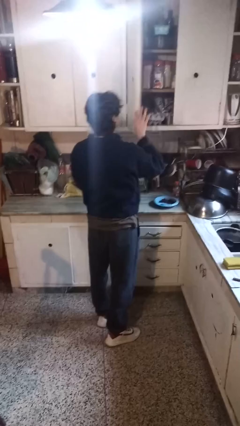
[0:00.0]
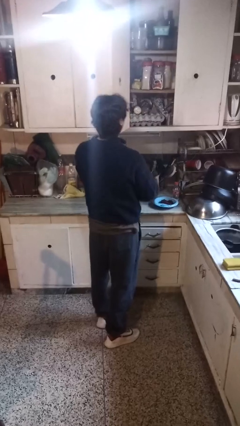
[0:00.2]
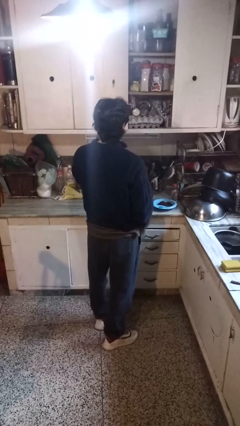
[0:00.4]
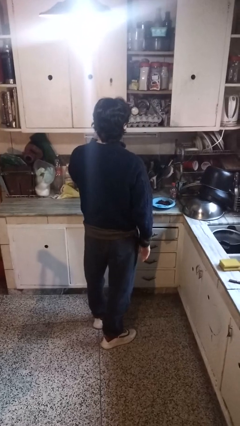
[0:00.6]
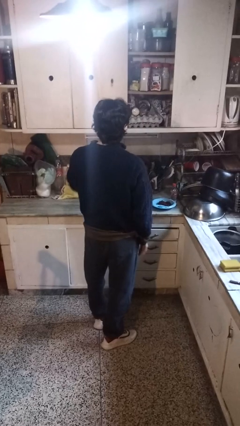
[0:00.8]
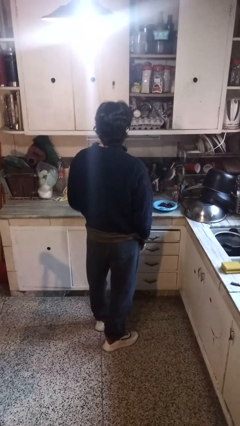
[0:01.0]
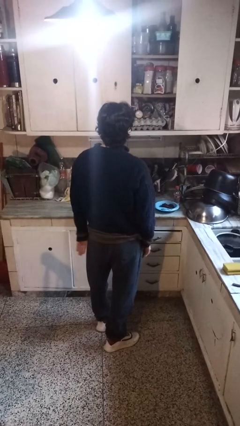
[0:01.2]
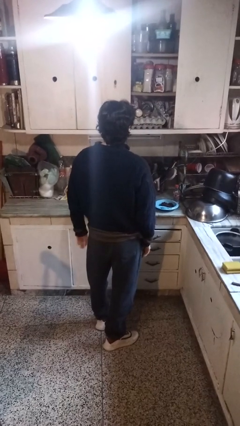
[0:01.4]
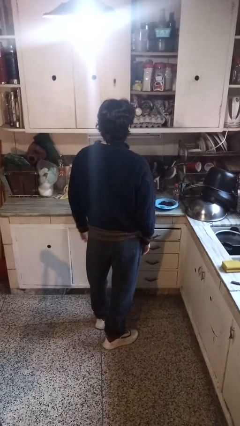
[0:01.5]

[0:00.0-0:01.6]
person opens cabinet

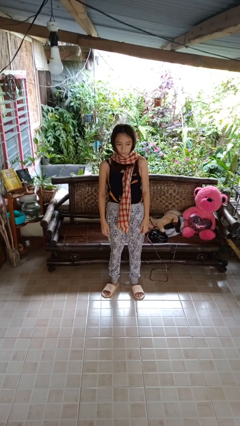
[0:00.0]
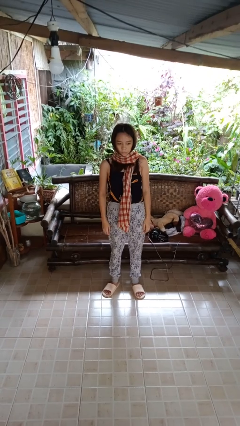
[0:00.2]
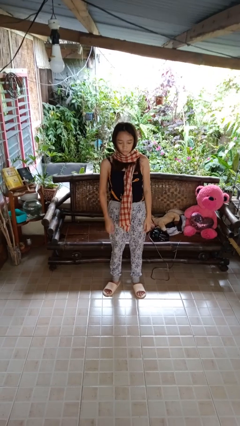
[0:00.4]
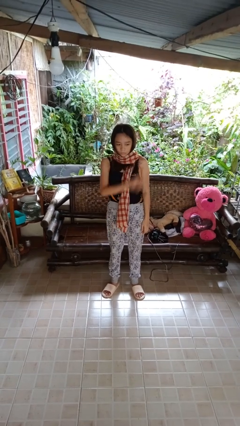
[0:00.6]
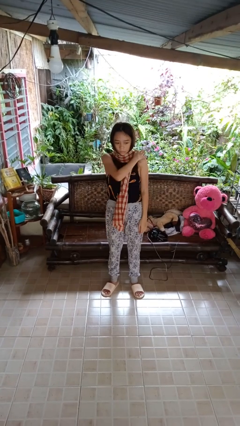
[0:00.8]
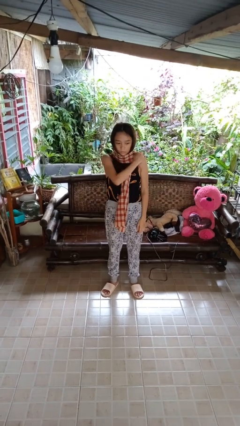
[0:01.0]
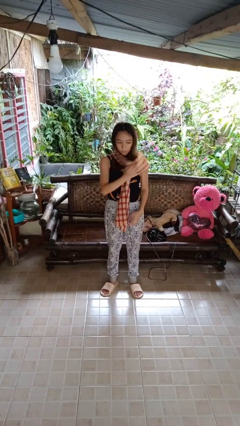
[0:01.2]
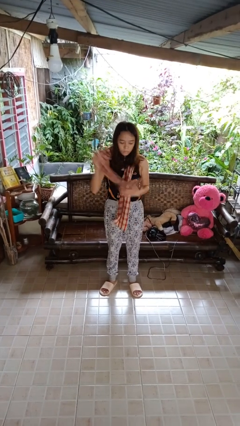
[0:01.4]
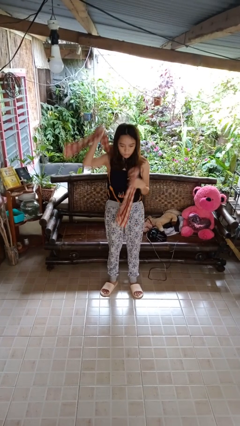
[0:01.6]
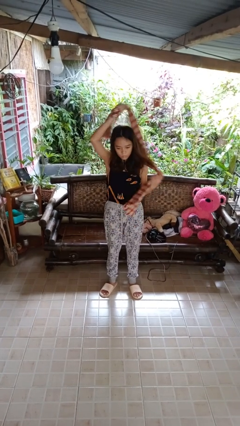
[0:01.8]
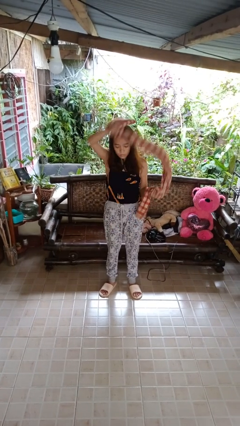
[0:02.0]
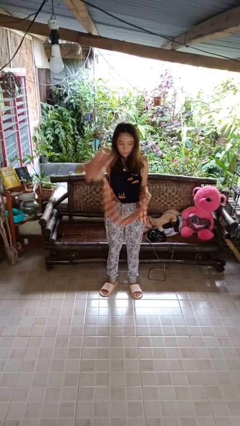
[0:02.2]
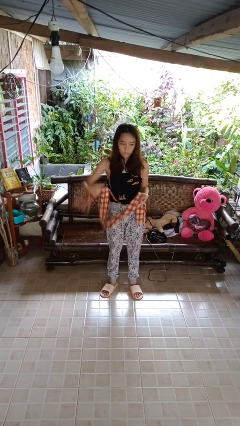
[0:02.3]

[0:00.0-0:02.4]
person takes off scarf

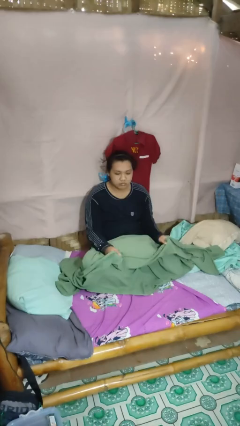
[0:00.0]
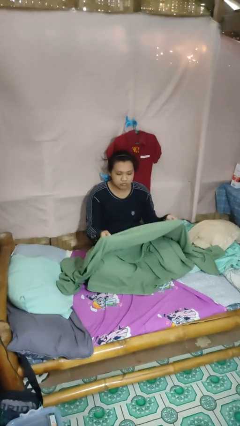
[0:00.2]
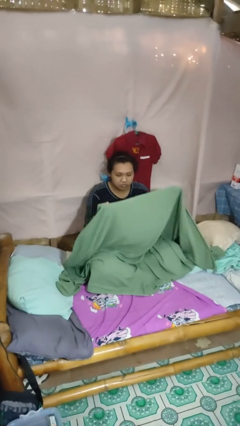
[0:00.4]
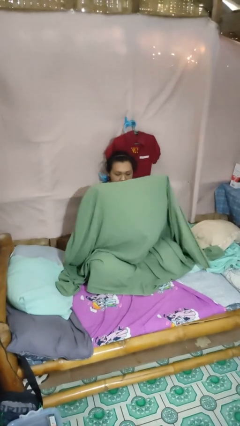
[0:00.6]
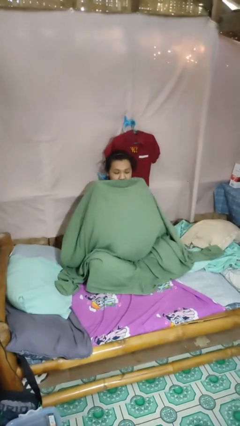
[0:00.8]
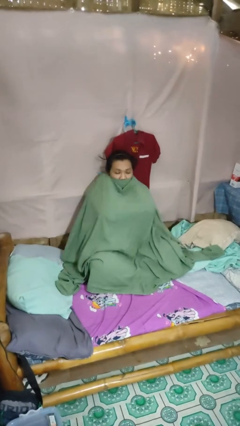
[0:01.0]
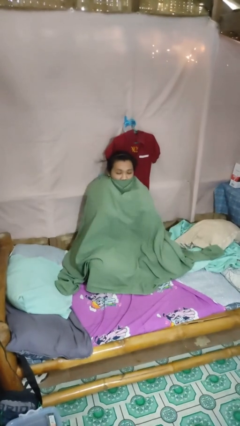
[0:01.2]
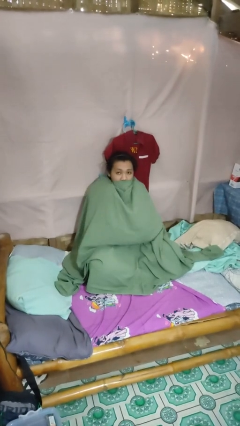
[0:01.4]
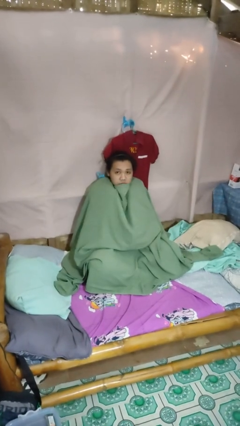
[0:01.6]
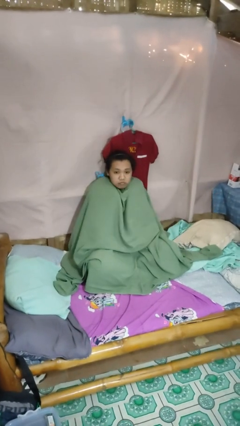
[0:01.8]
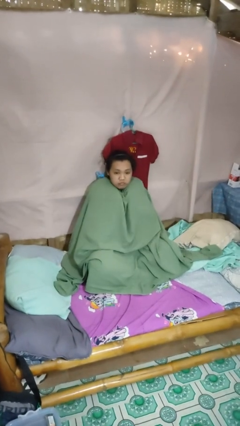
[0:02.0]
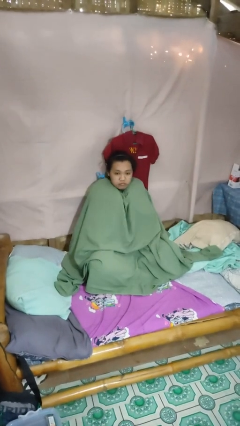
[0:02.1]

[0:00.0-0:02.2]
person covers with blanket

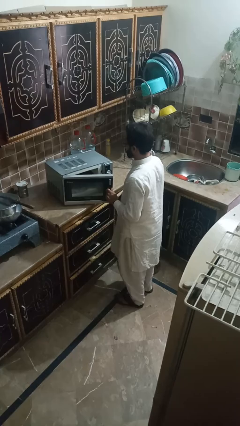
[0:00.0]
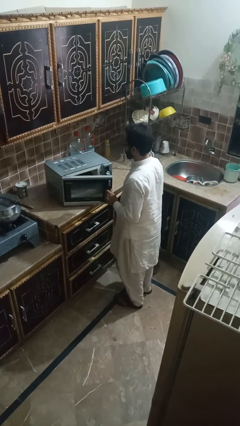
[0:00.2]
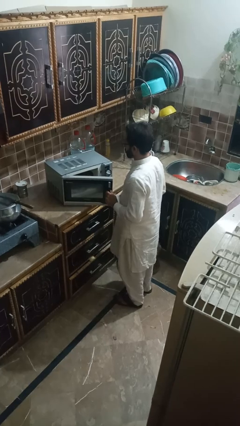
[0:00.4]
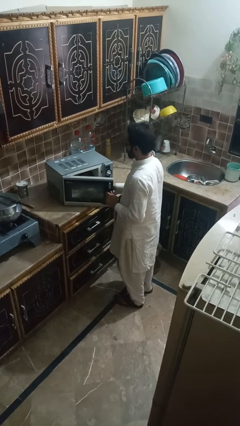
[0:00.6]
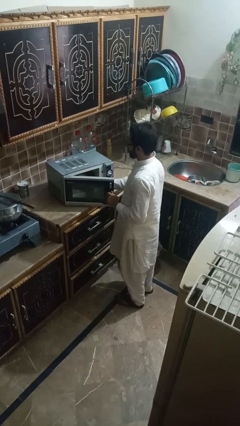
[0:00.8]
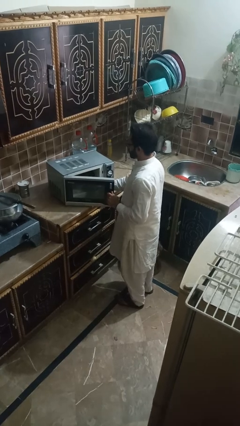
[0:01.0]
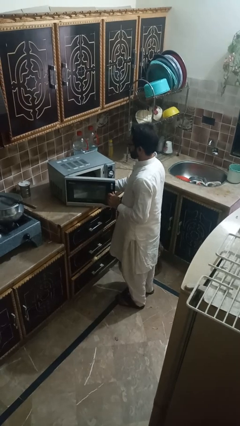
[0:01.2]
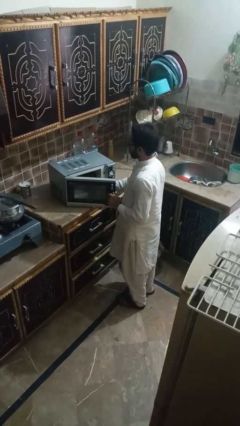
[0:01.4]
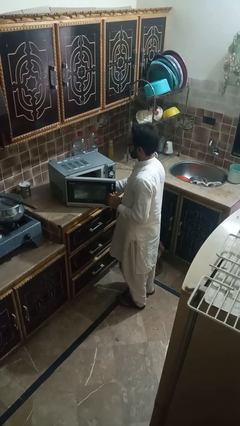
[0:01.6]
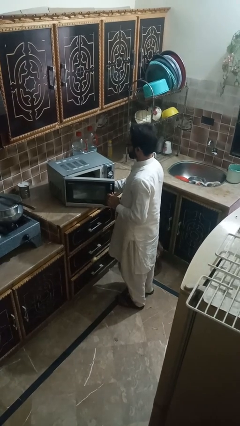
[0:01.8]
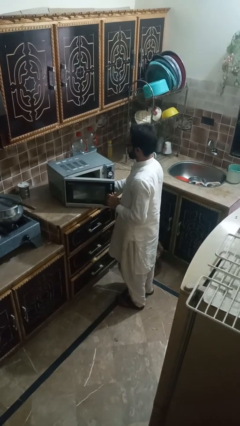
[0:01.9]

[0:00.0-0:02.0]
person puts object into microwave

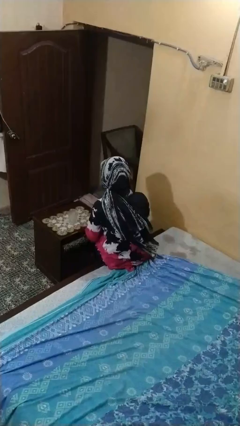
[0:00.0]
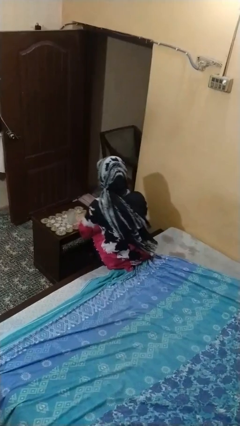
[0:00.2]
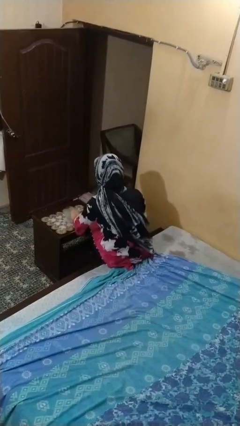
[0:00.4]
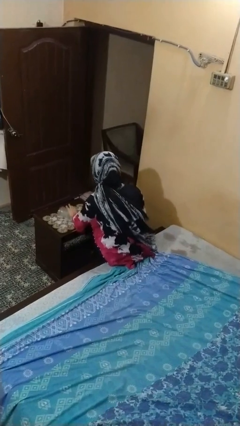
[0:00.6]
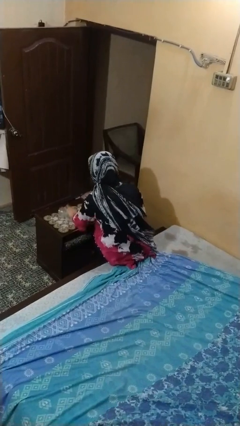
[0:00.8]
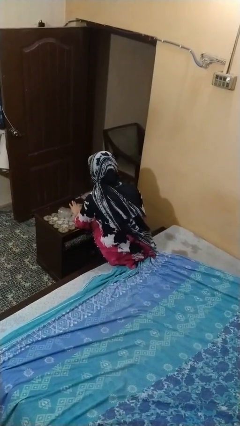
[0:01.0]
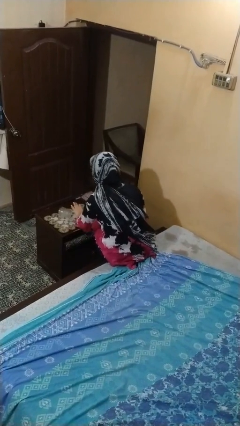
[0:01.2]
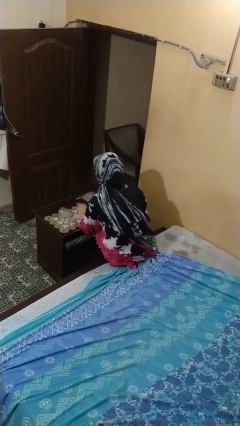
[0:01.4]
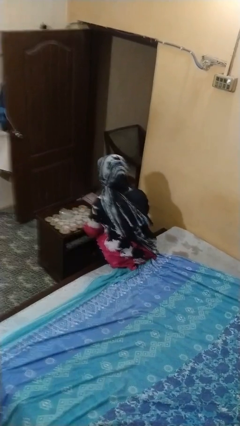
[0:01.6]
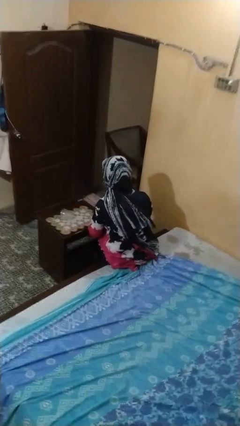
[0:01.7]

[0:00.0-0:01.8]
person knocks over glass

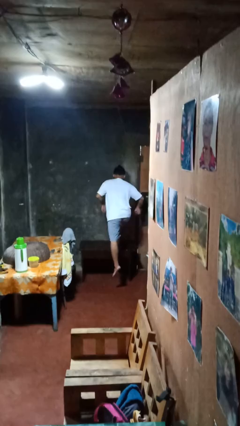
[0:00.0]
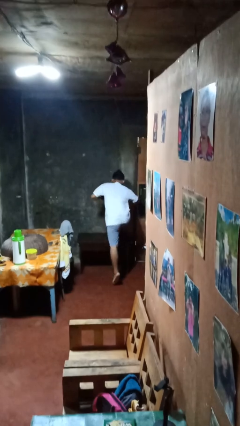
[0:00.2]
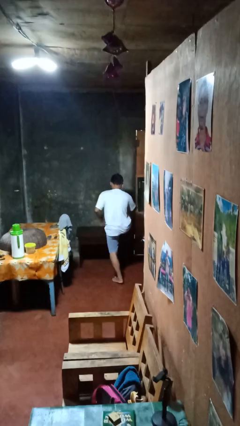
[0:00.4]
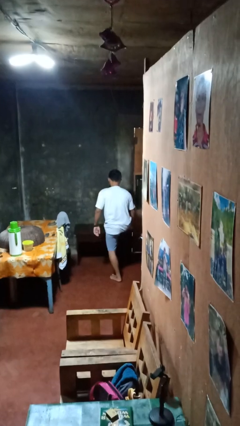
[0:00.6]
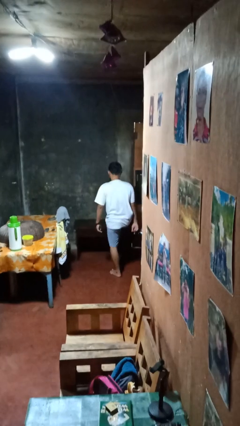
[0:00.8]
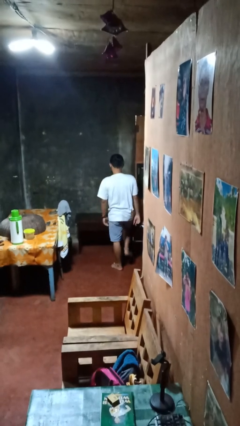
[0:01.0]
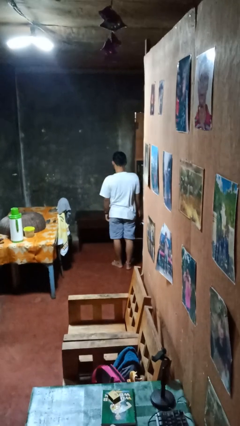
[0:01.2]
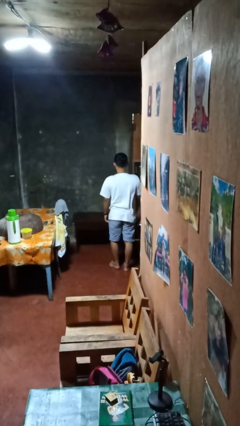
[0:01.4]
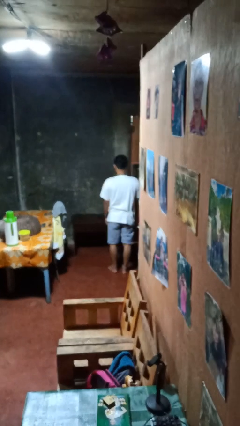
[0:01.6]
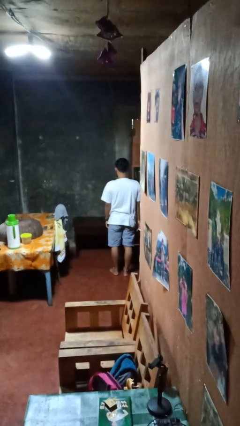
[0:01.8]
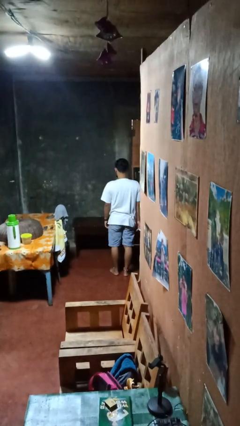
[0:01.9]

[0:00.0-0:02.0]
person climbs off table

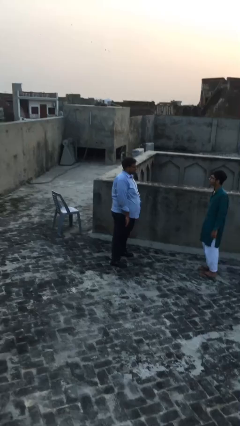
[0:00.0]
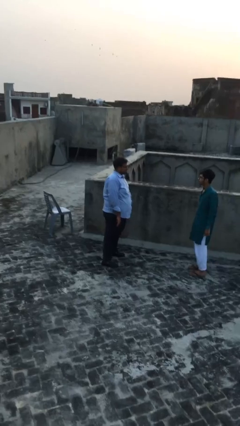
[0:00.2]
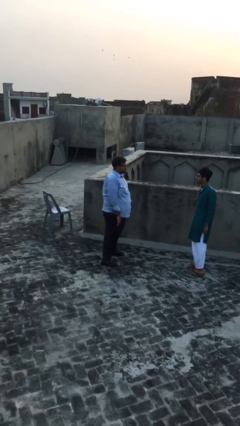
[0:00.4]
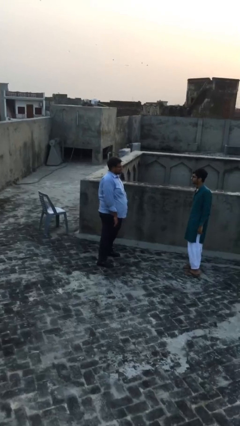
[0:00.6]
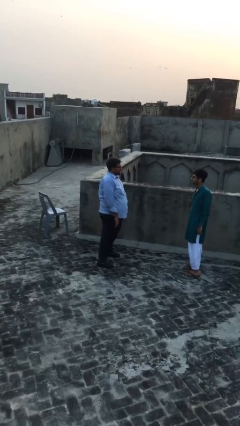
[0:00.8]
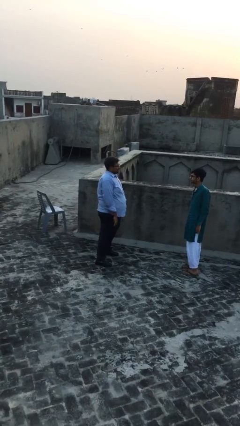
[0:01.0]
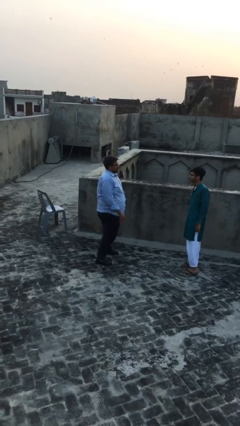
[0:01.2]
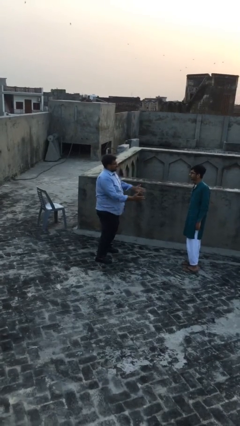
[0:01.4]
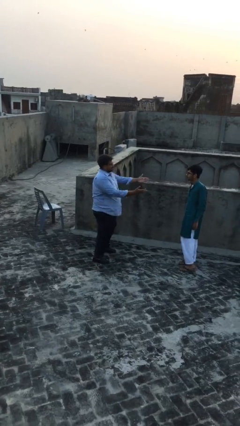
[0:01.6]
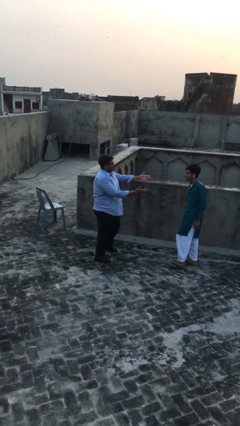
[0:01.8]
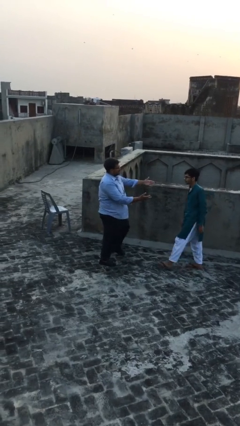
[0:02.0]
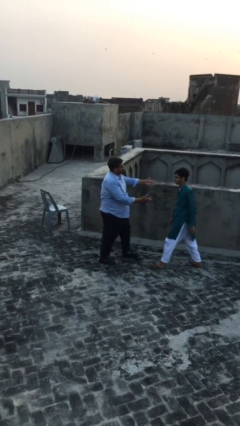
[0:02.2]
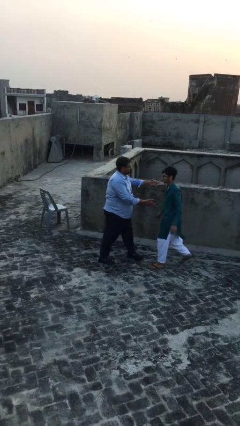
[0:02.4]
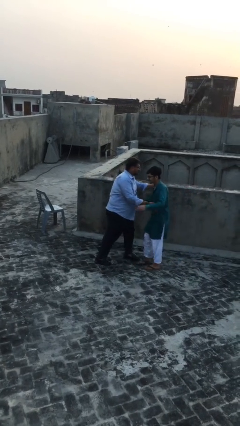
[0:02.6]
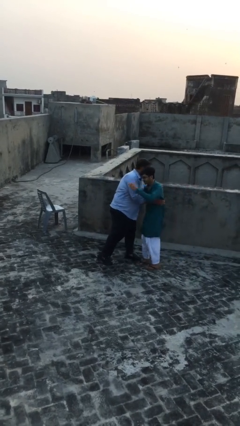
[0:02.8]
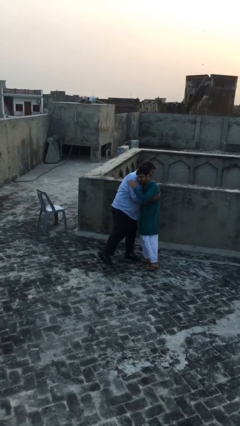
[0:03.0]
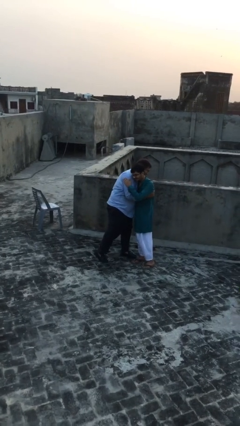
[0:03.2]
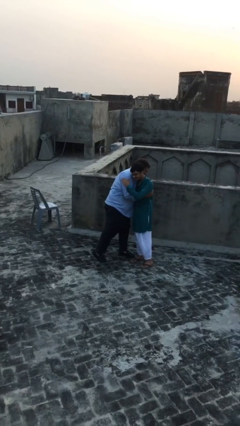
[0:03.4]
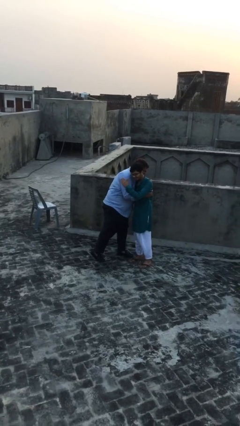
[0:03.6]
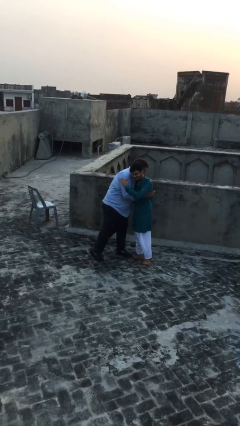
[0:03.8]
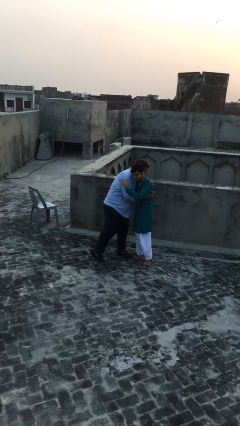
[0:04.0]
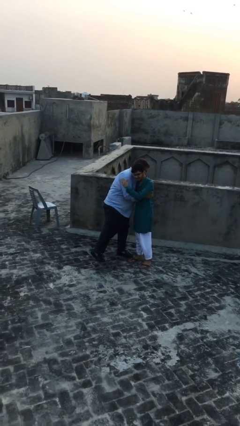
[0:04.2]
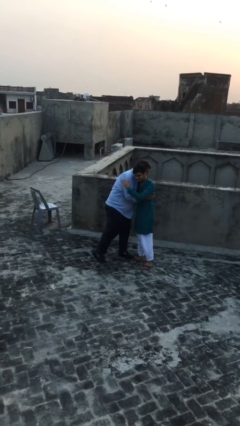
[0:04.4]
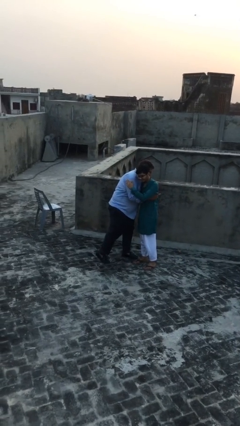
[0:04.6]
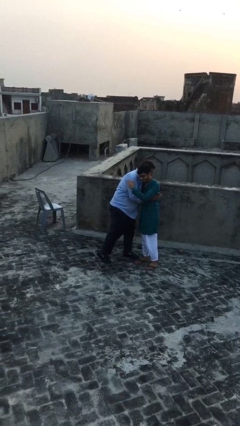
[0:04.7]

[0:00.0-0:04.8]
person embraces person

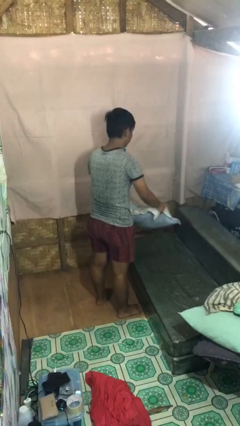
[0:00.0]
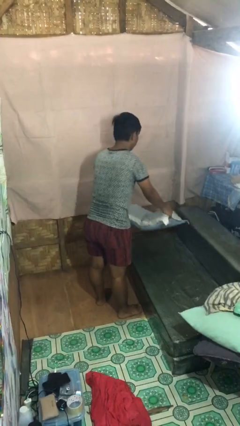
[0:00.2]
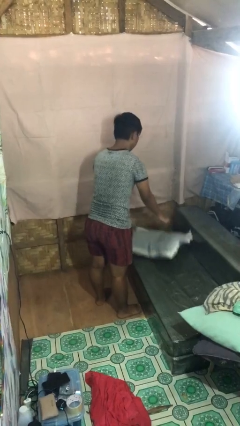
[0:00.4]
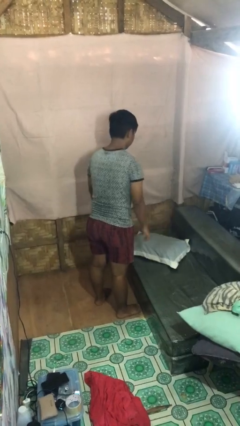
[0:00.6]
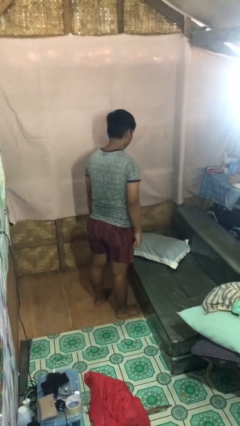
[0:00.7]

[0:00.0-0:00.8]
person puts down object on couch
